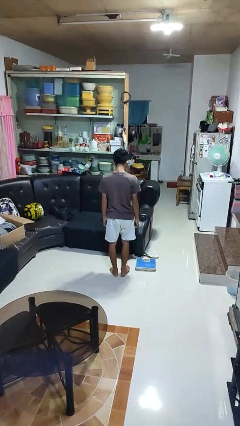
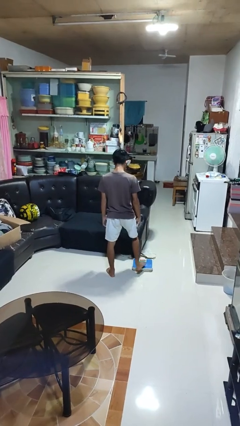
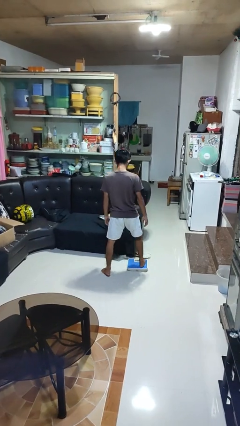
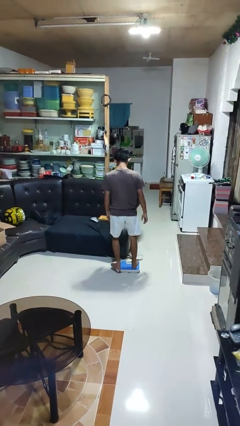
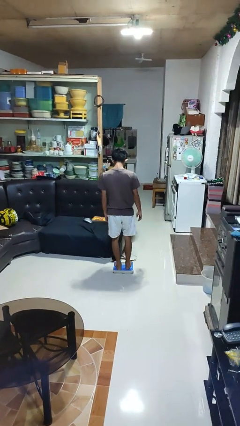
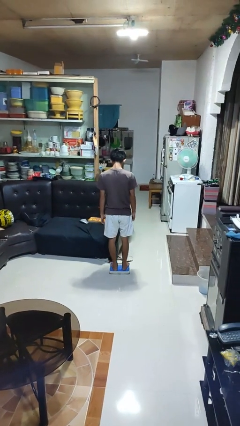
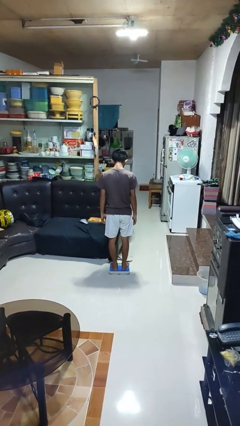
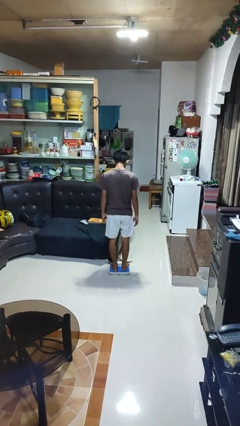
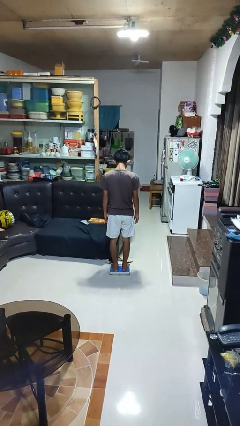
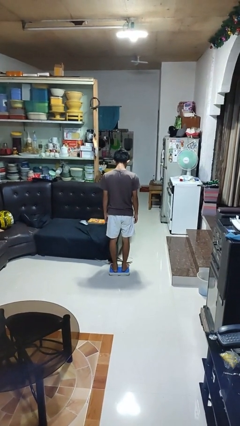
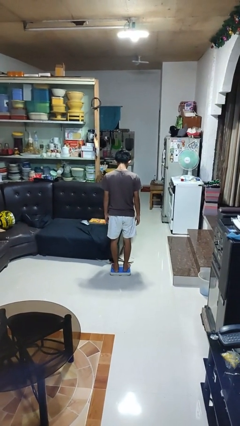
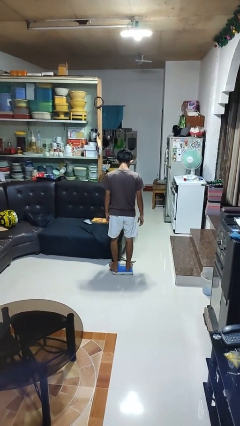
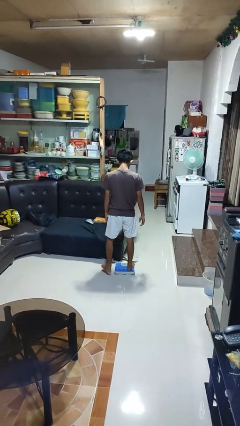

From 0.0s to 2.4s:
person uses bodyweight scale

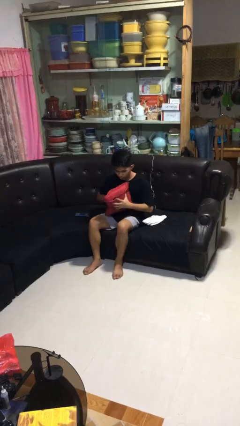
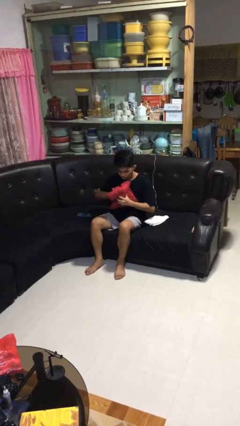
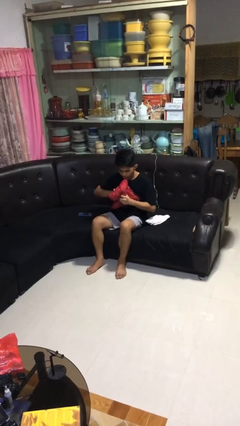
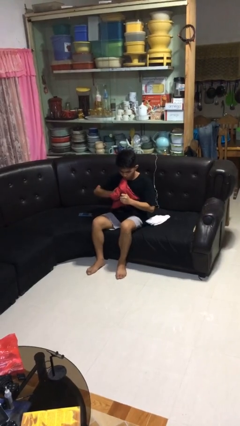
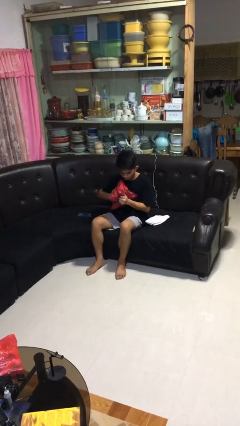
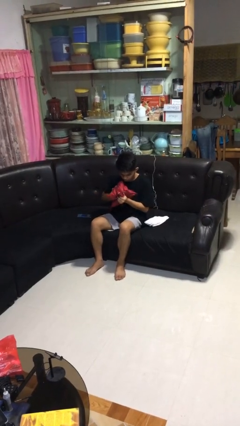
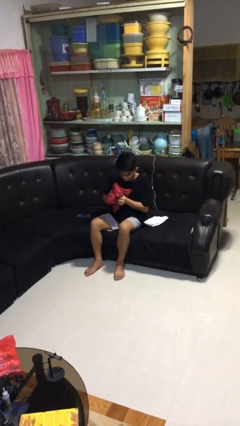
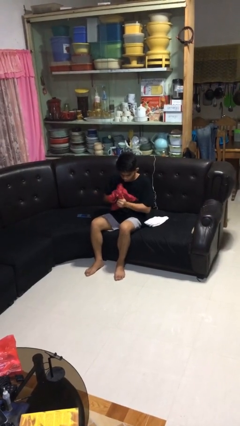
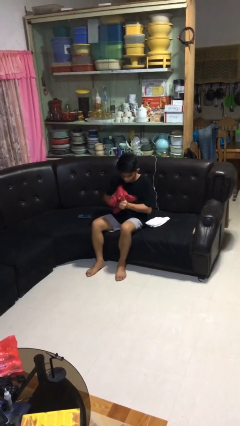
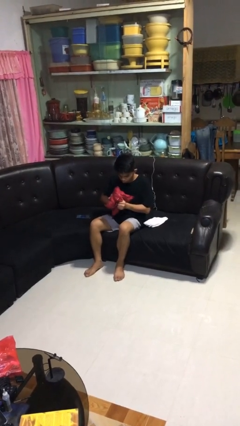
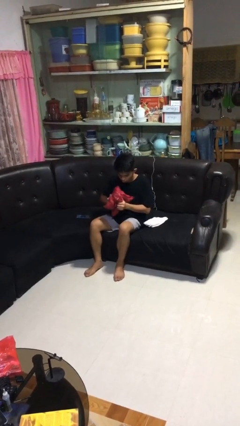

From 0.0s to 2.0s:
person squeezes object

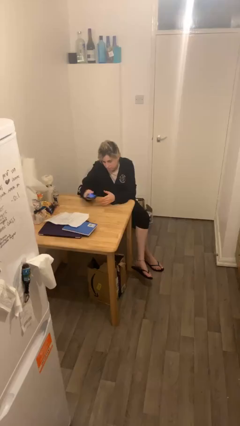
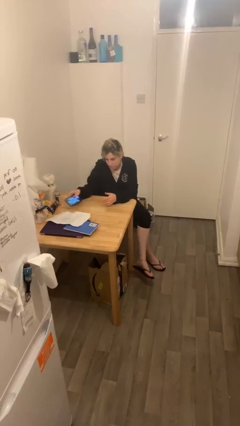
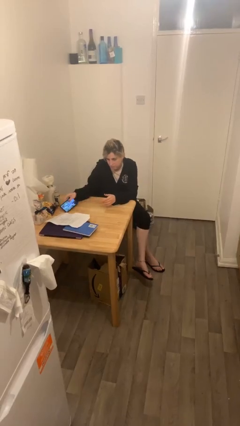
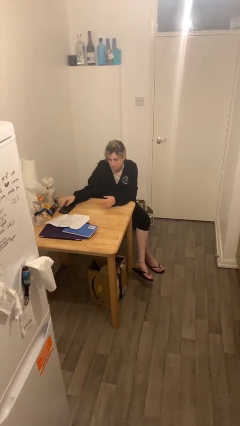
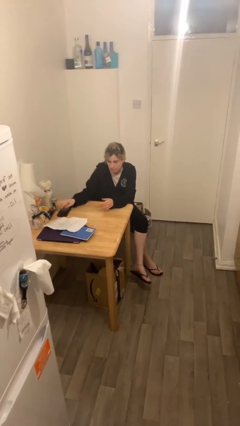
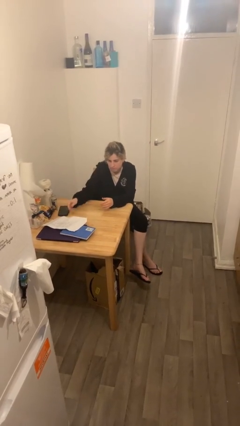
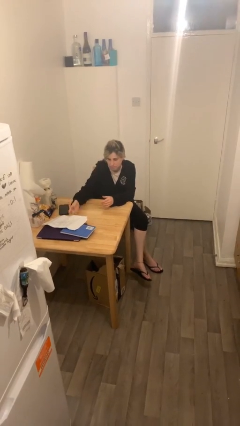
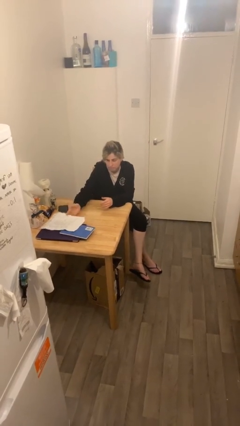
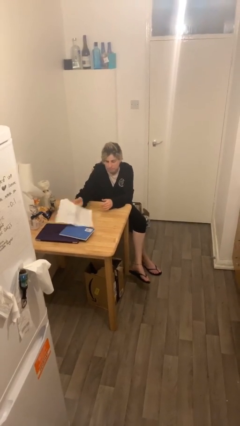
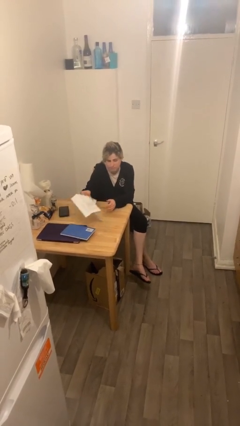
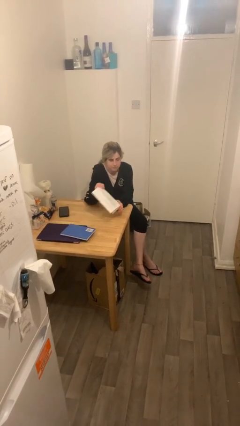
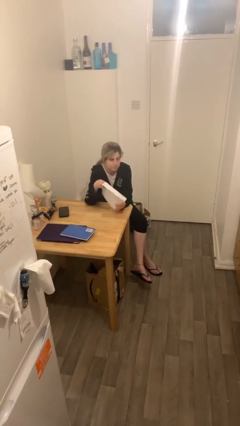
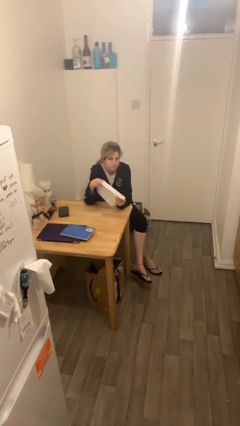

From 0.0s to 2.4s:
person picks up object from table

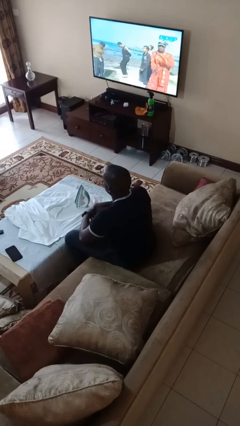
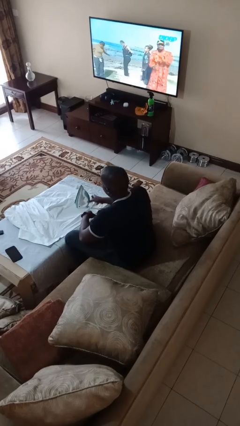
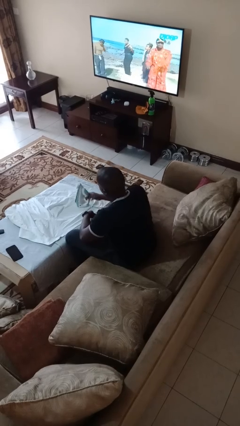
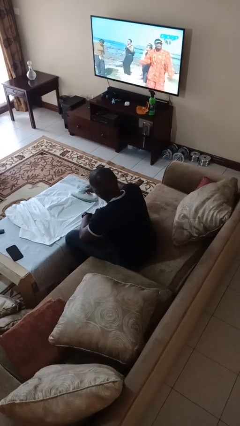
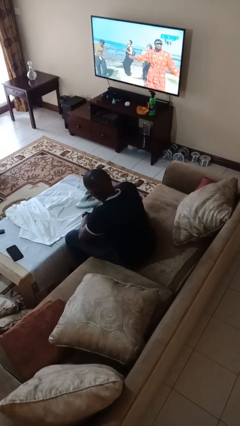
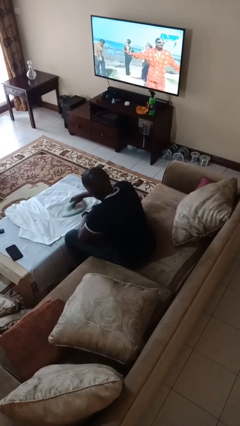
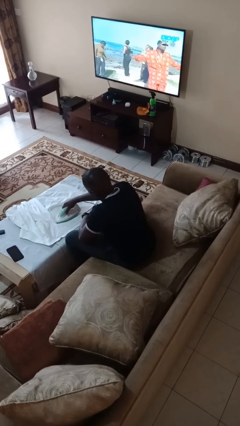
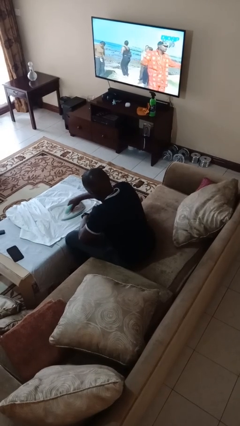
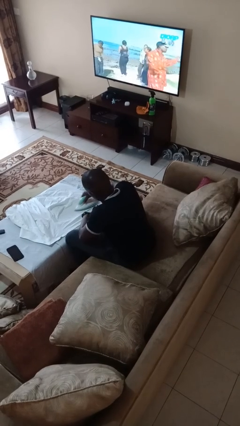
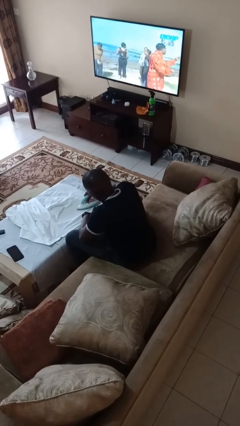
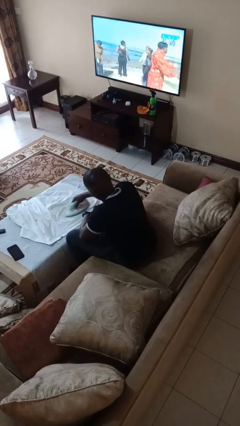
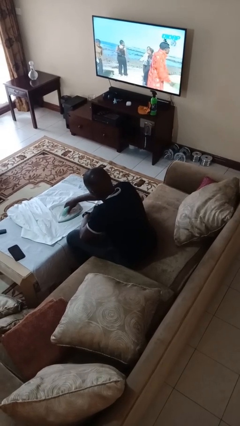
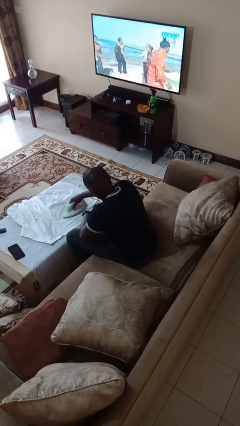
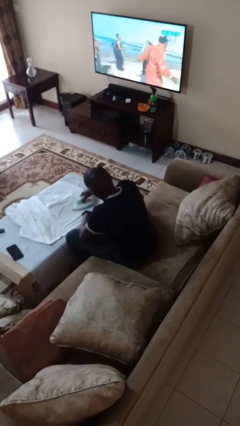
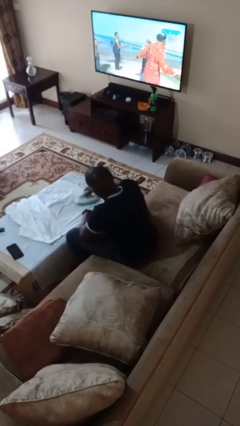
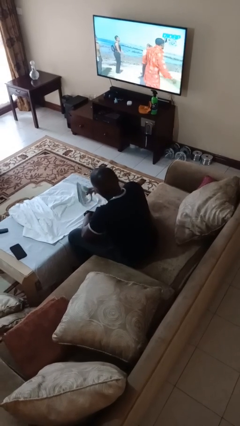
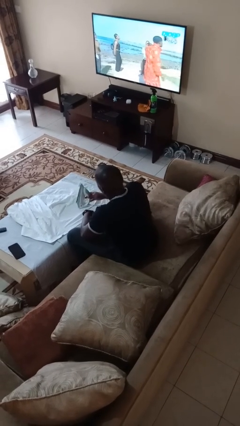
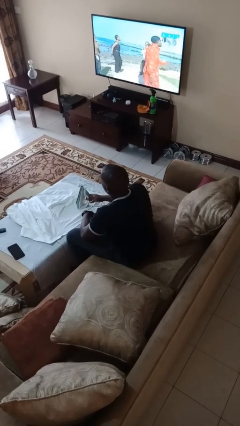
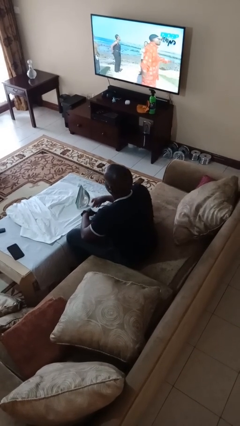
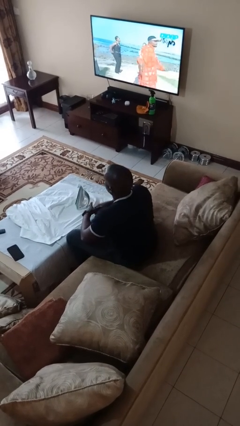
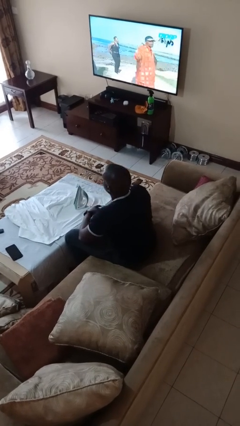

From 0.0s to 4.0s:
person irons clothes

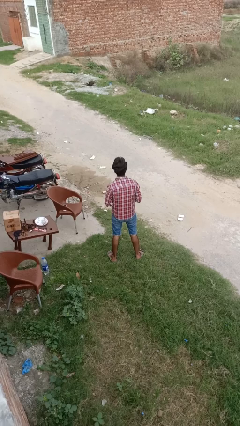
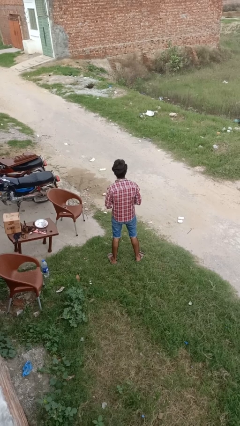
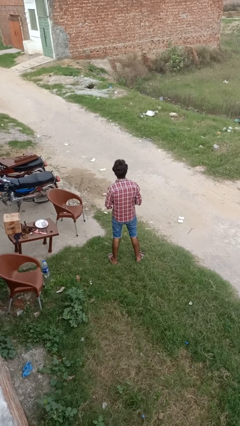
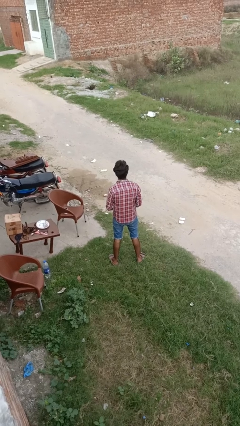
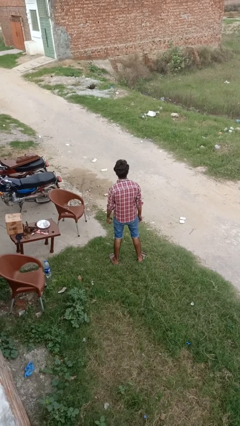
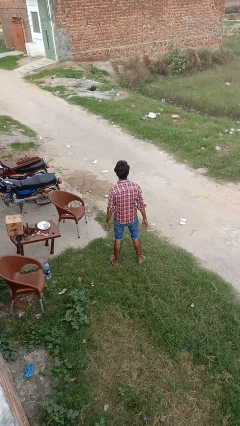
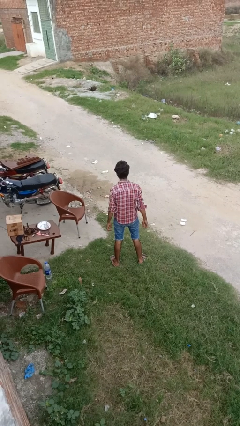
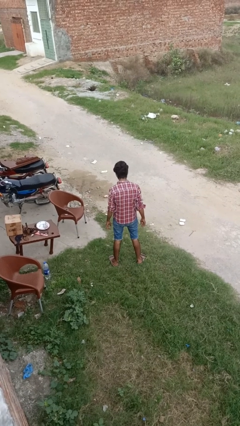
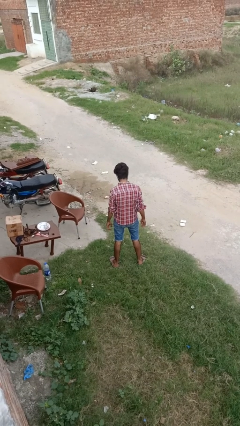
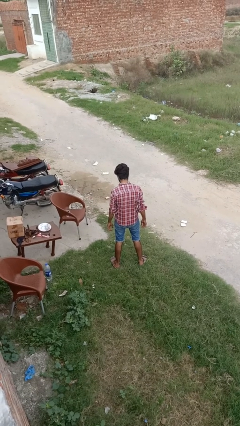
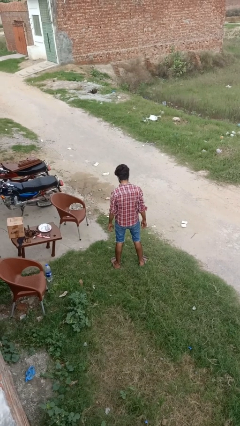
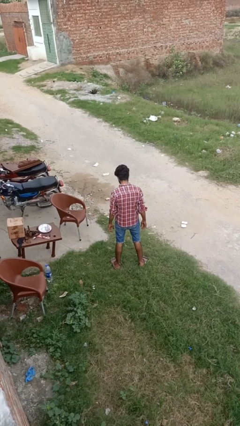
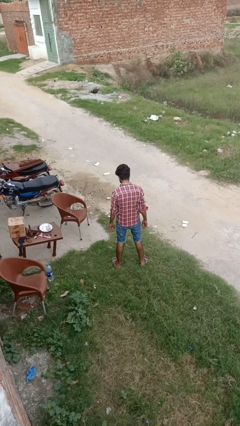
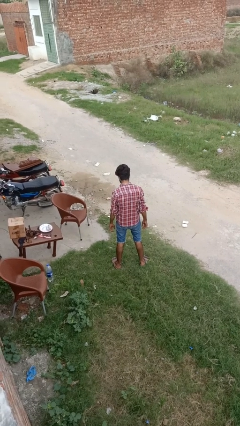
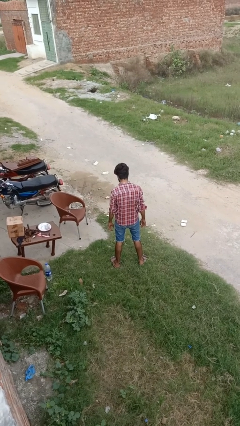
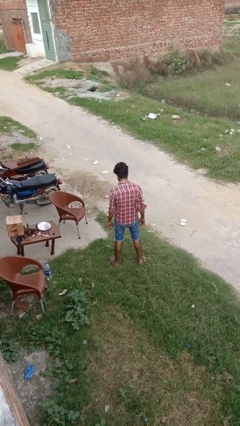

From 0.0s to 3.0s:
person takes off ring

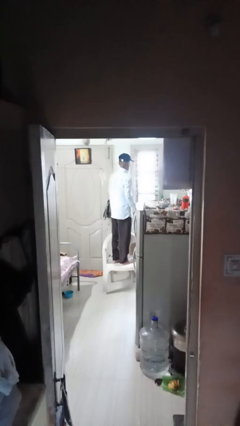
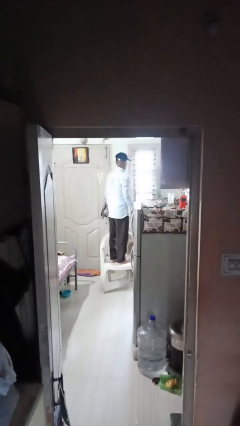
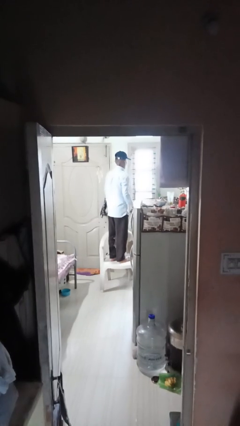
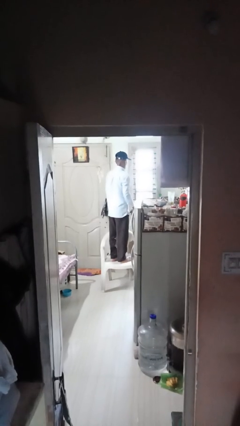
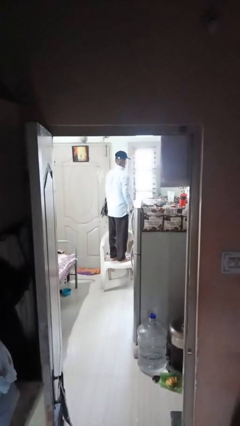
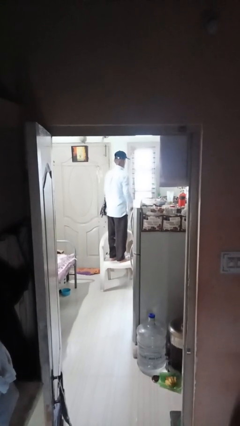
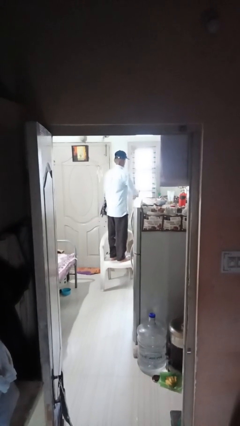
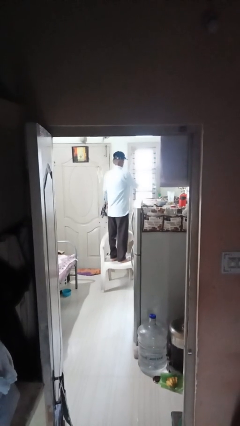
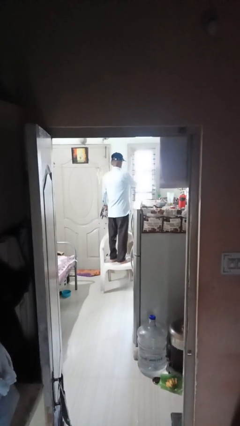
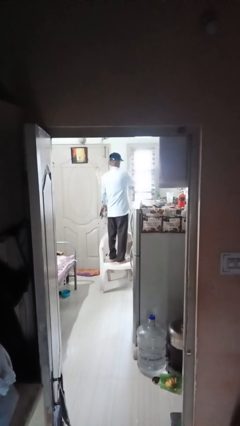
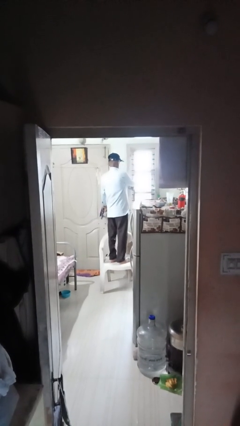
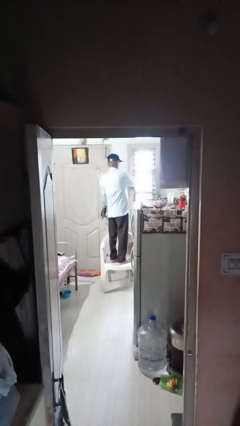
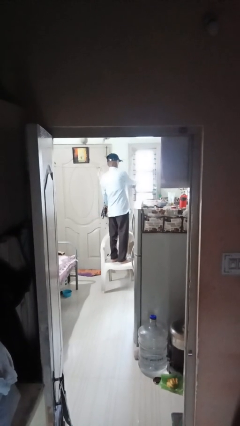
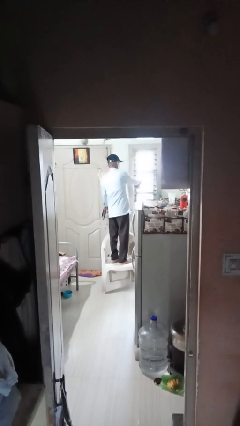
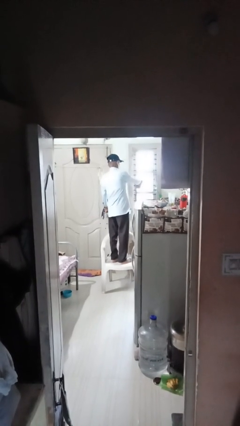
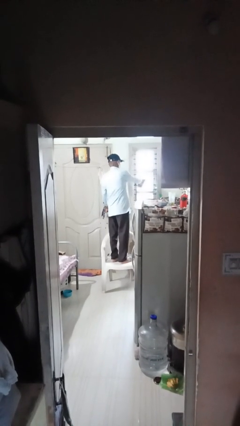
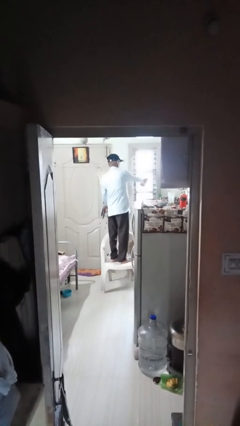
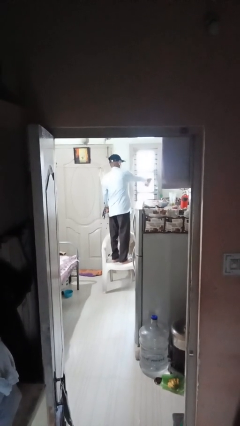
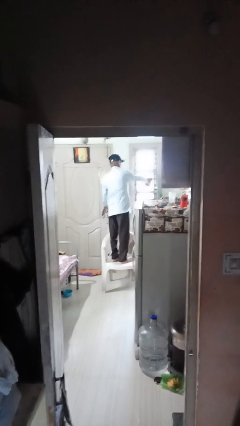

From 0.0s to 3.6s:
person sprays from bottle
